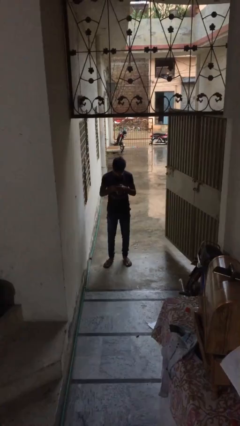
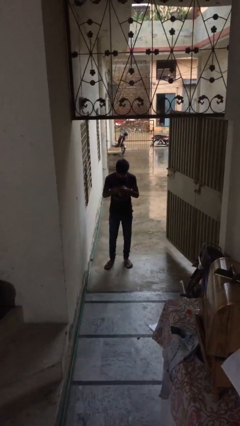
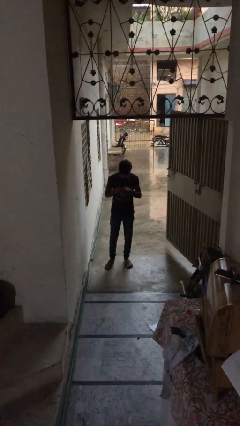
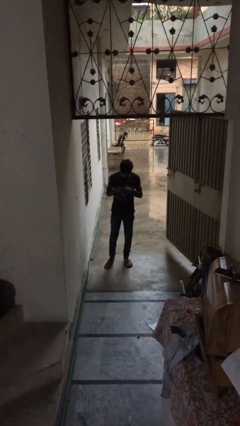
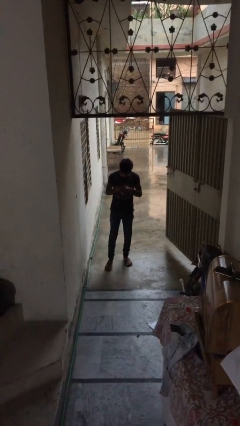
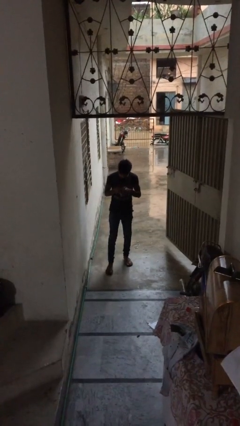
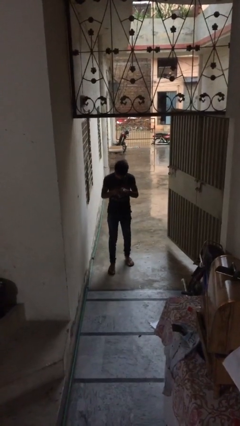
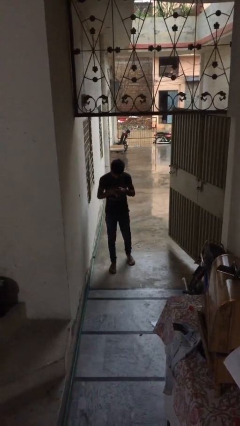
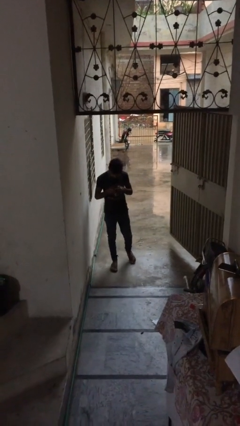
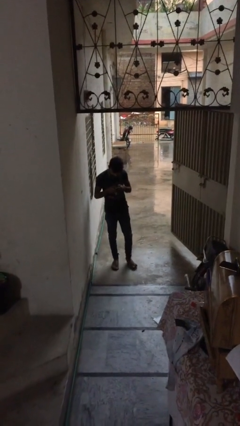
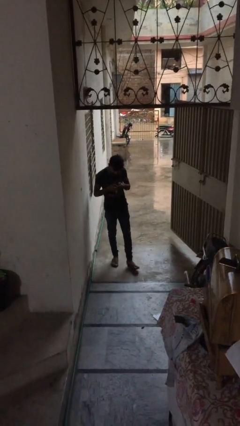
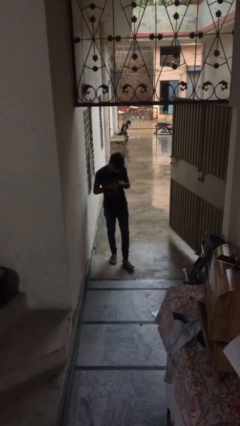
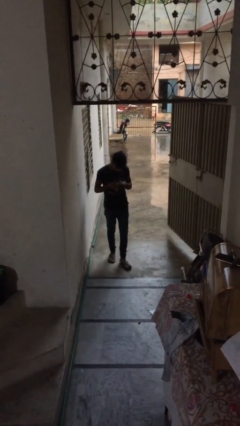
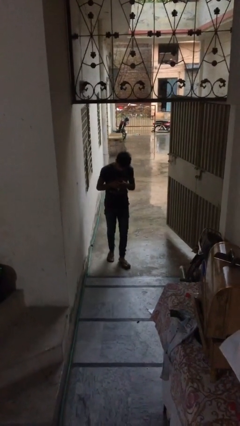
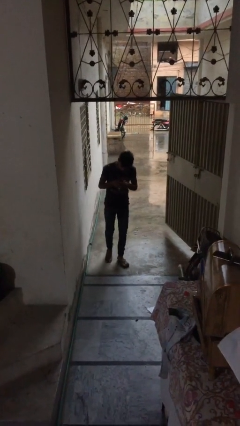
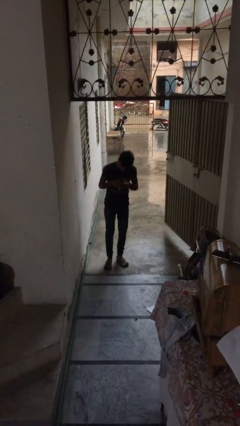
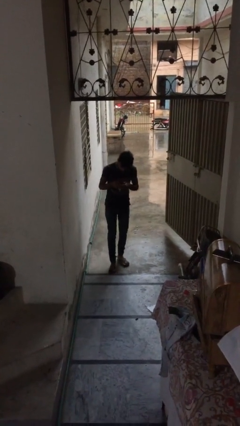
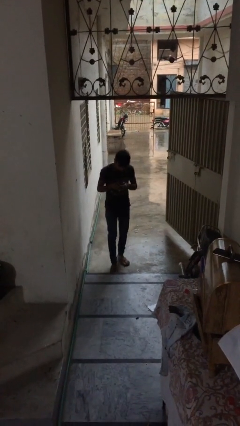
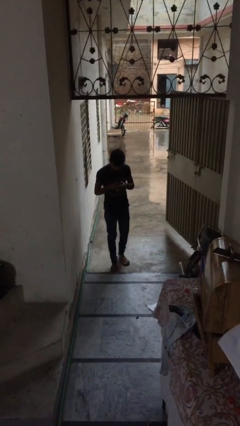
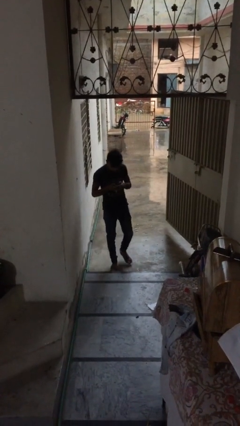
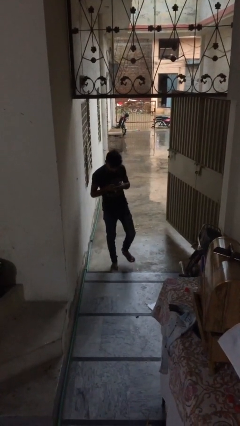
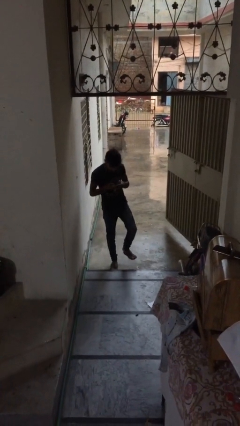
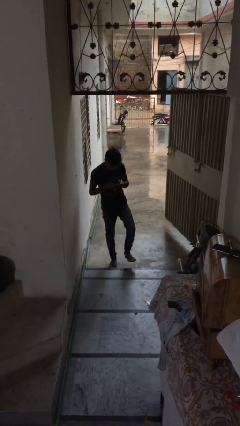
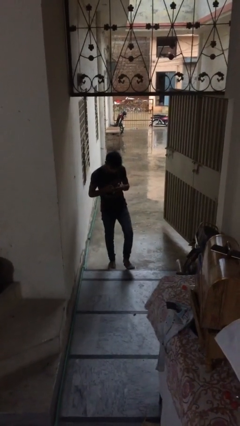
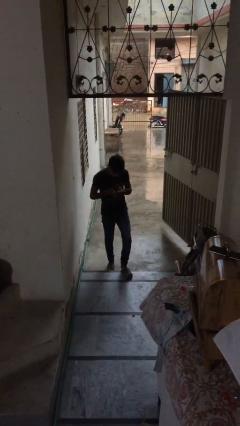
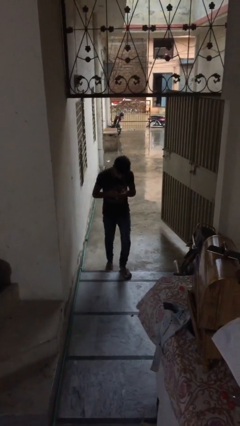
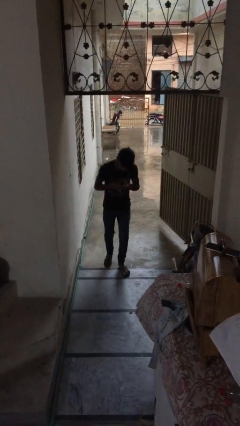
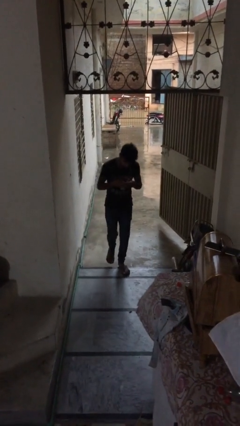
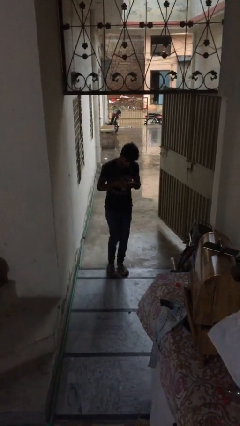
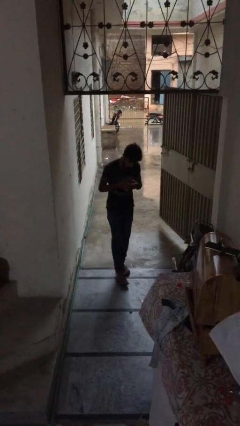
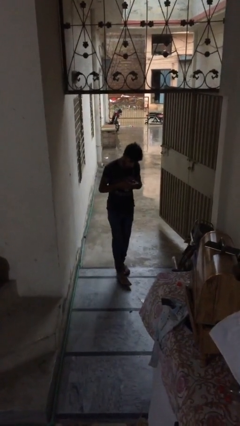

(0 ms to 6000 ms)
person texts on phone

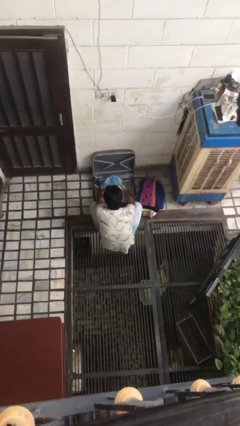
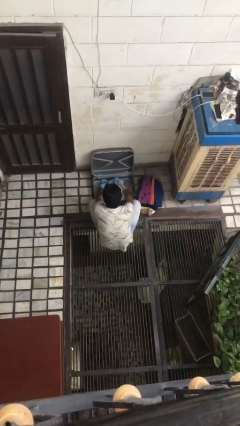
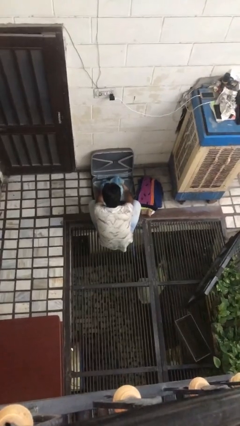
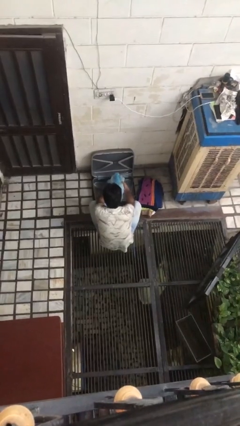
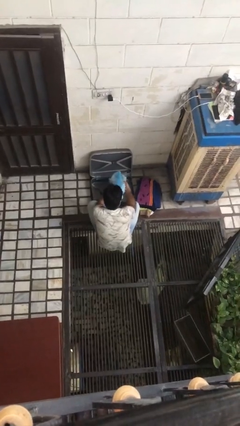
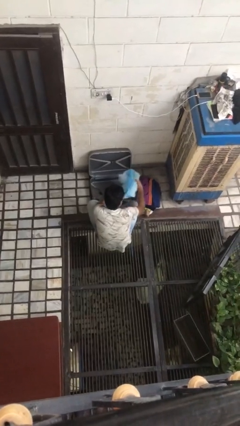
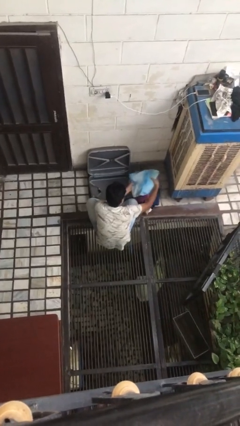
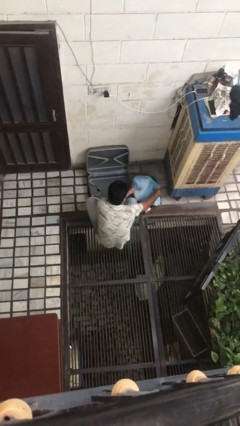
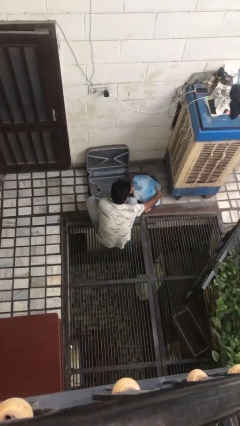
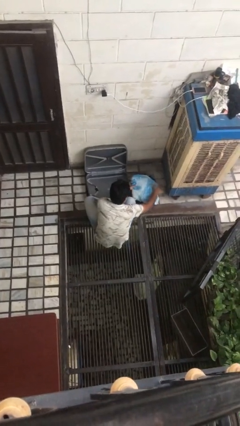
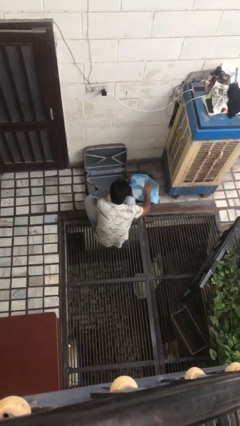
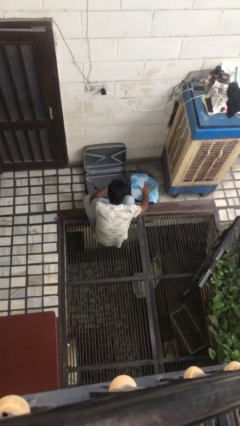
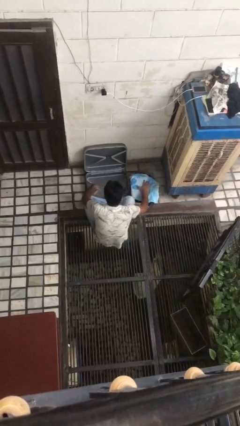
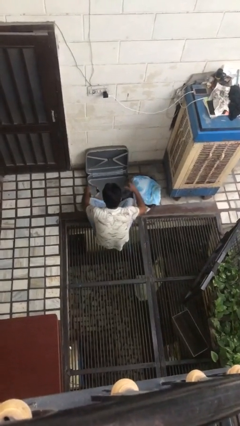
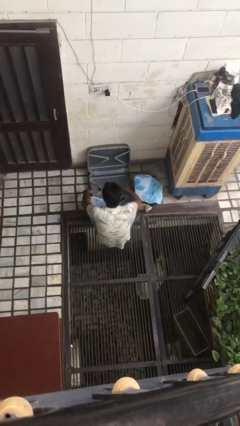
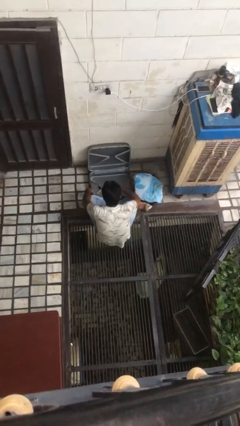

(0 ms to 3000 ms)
person unloads clothes from suitcase

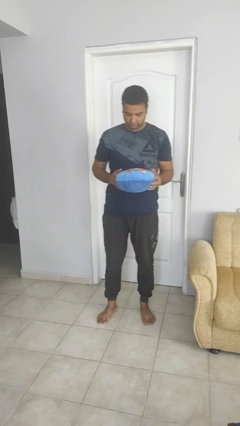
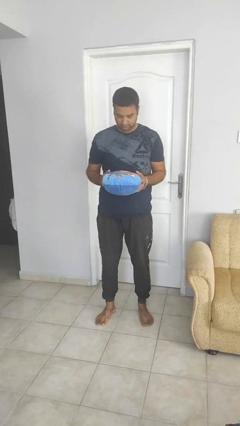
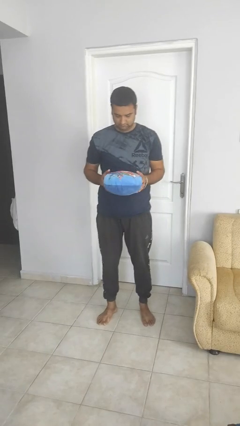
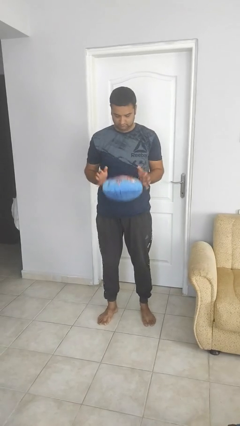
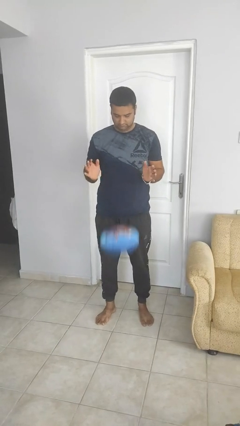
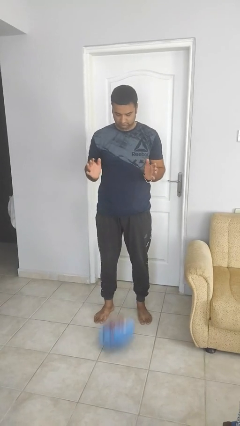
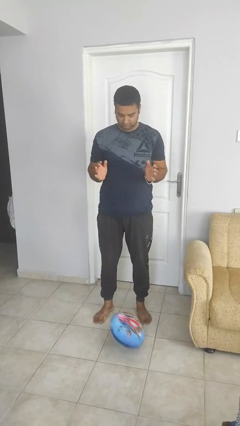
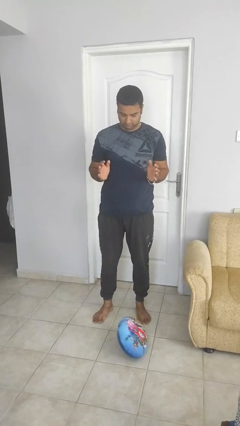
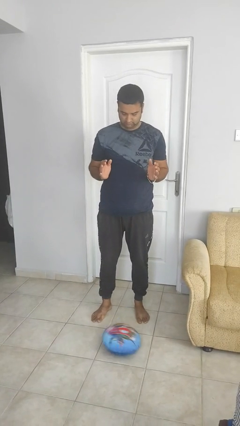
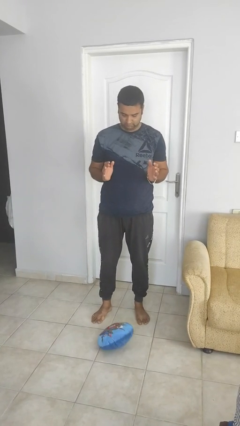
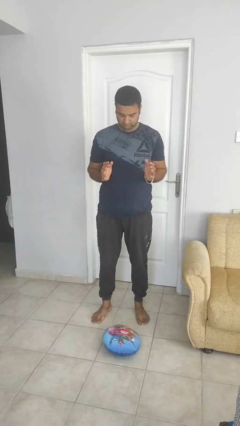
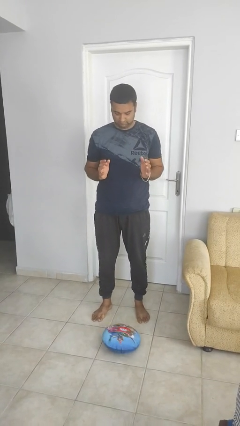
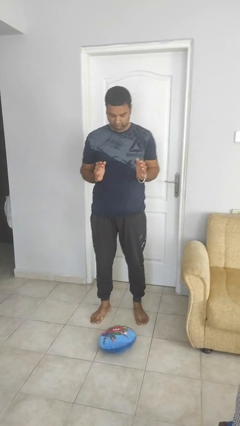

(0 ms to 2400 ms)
person drops object

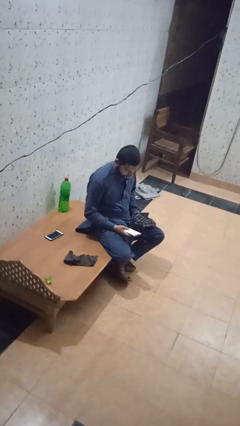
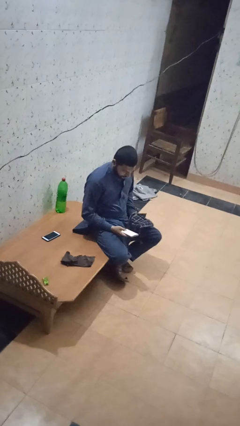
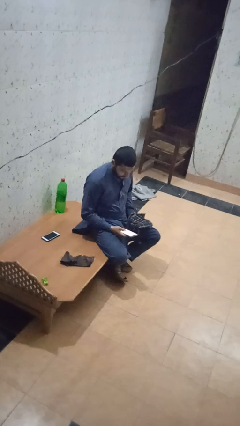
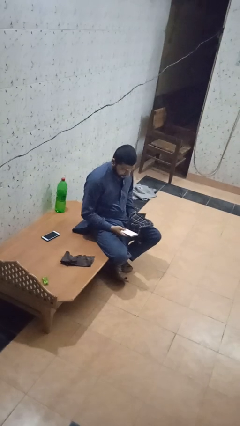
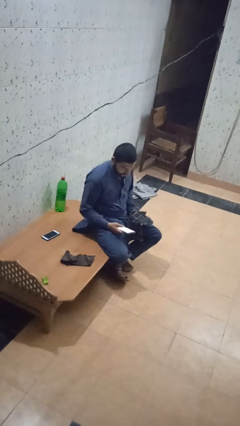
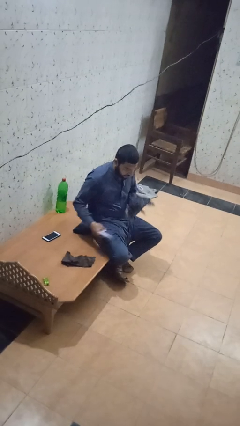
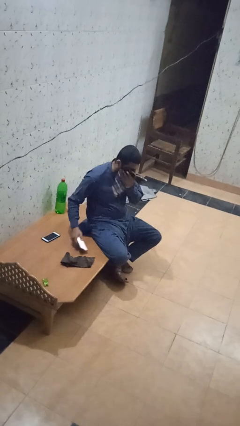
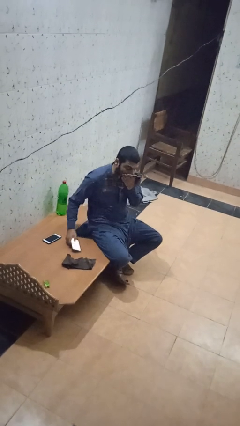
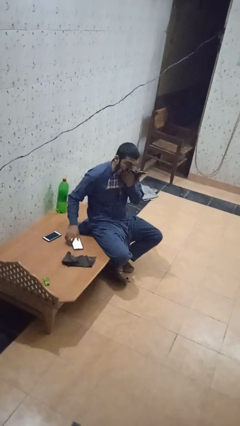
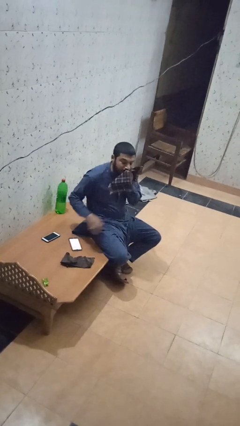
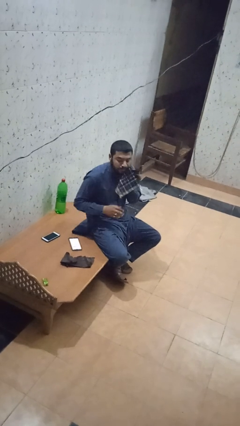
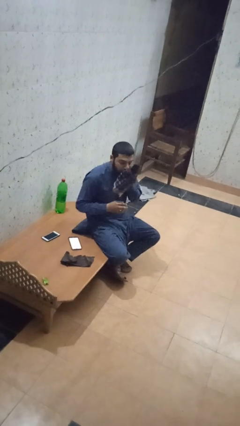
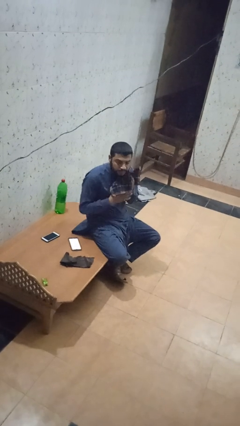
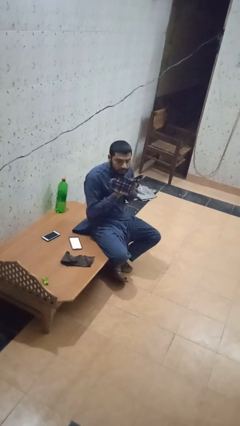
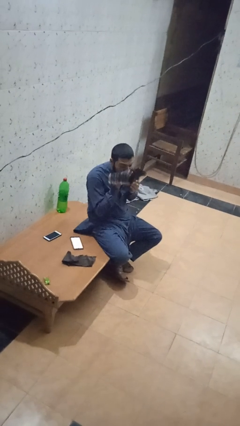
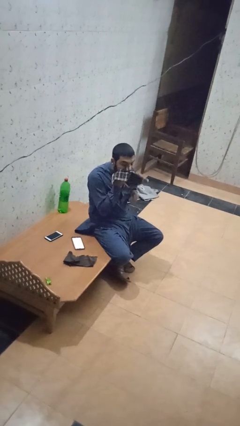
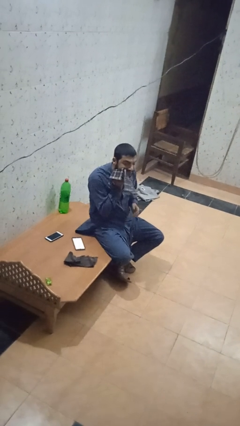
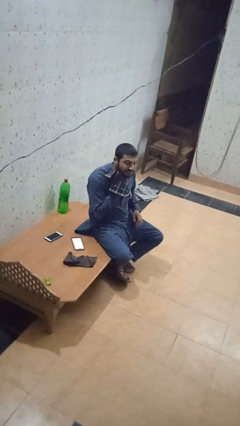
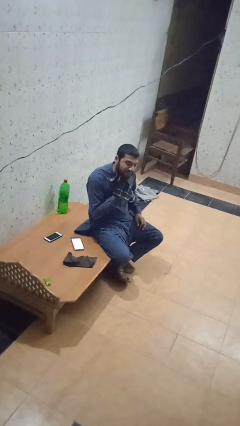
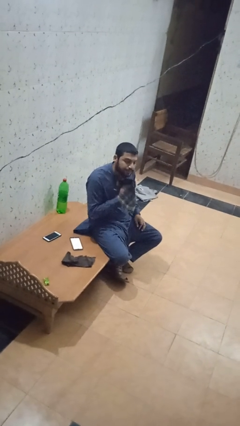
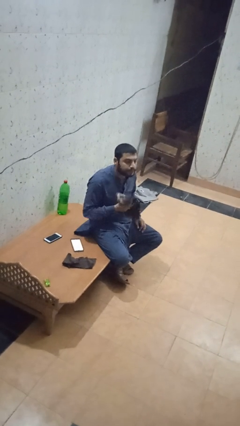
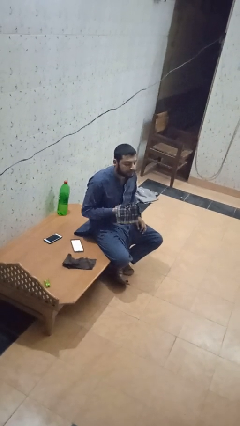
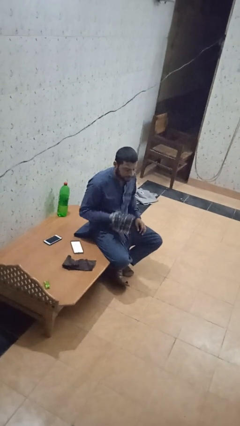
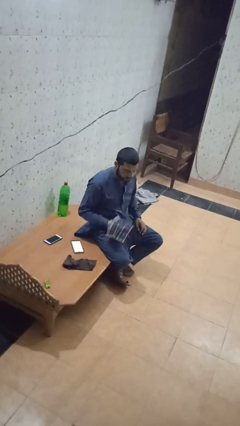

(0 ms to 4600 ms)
person wipes mouth with napkin

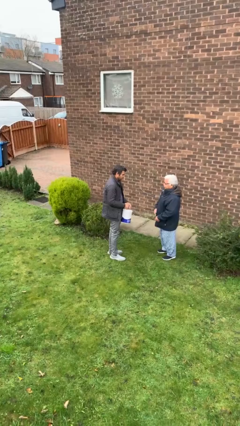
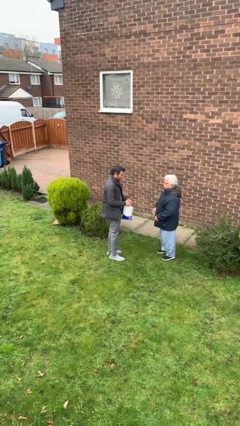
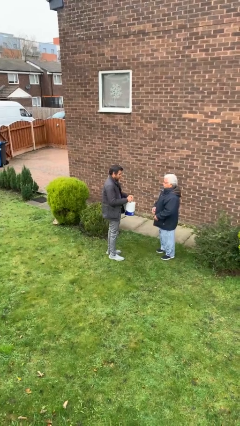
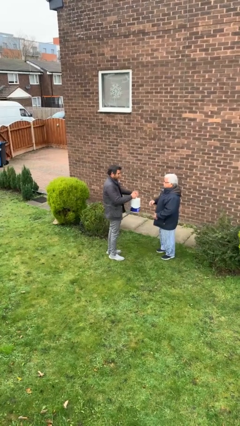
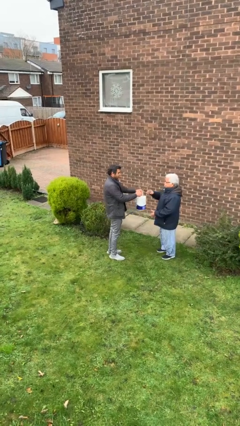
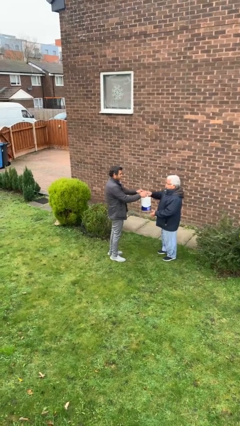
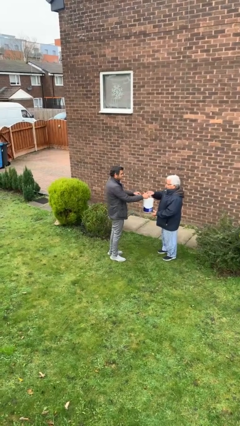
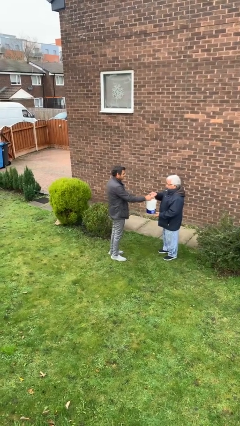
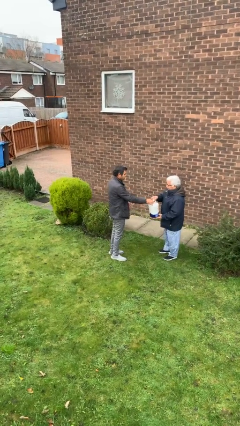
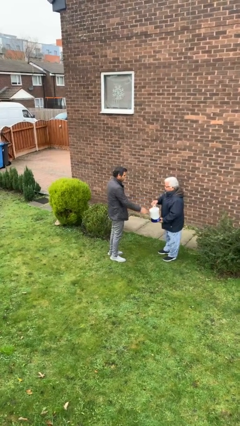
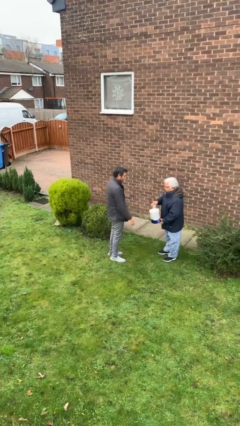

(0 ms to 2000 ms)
person transfers object to person
